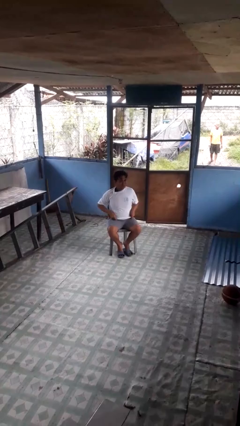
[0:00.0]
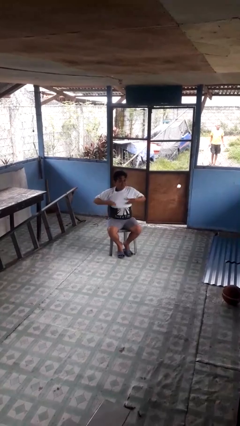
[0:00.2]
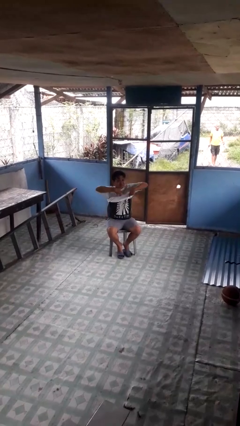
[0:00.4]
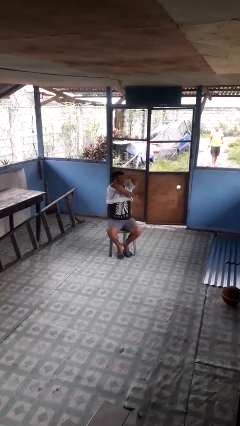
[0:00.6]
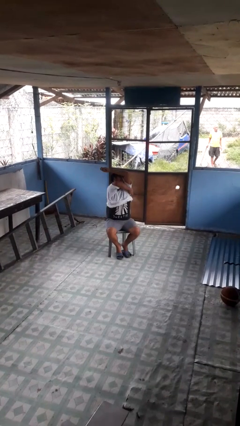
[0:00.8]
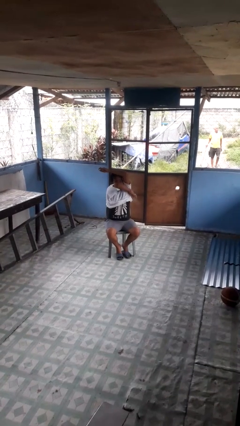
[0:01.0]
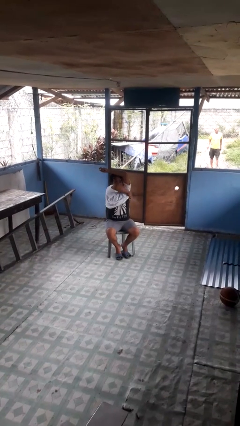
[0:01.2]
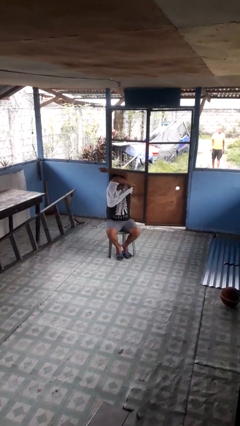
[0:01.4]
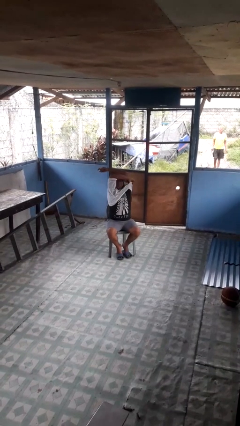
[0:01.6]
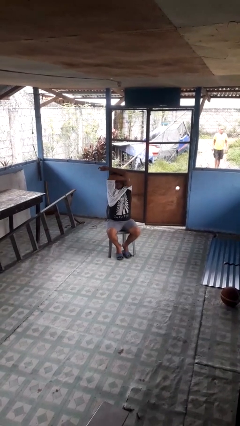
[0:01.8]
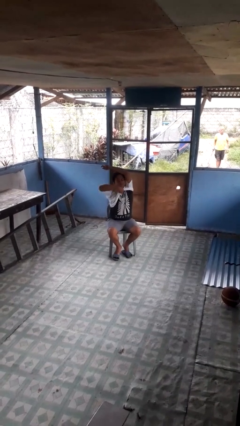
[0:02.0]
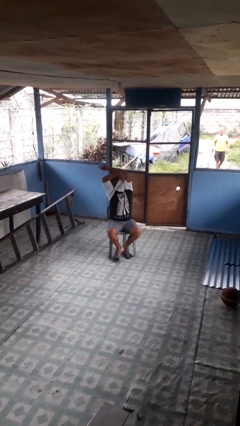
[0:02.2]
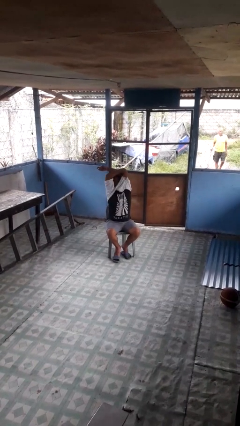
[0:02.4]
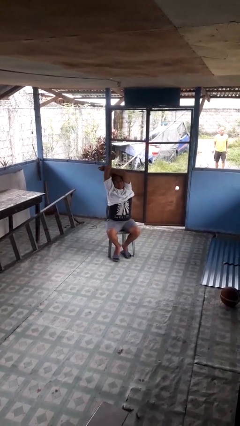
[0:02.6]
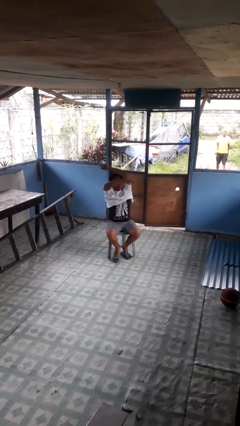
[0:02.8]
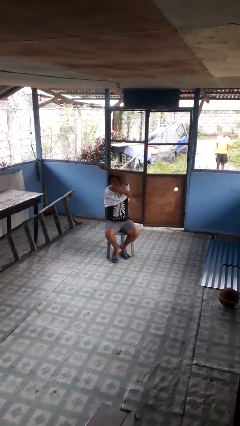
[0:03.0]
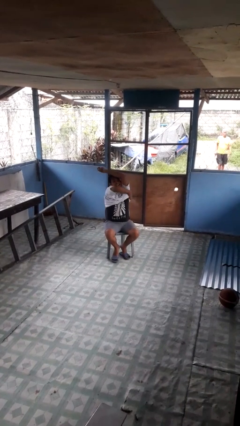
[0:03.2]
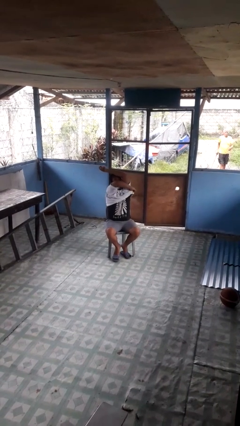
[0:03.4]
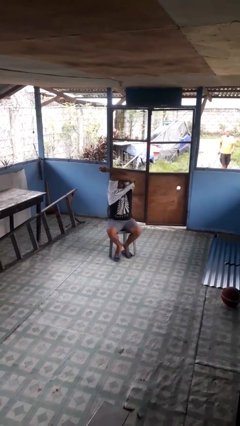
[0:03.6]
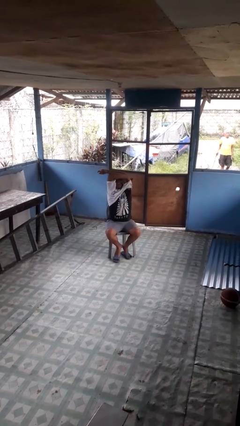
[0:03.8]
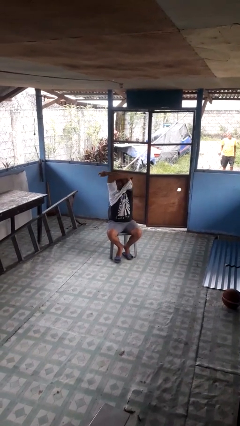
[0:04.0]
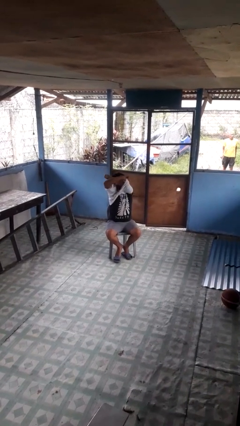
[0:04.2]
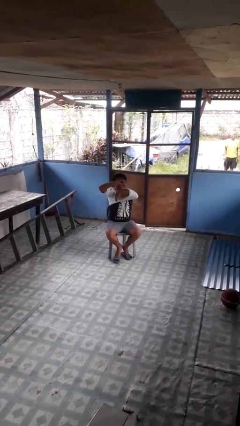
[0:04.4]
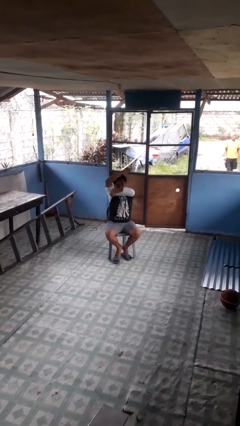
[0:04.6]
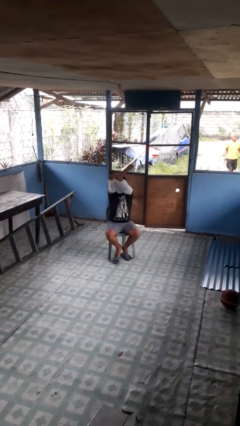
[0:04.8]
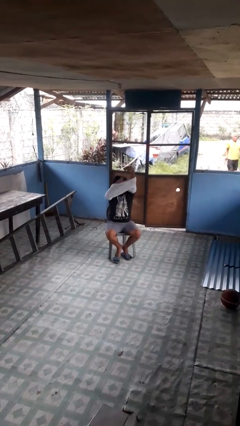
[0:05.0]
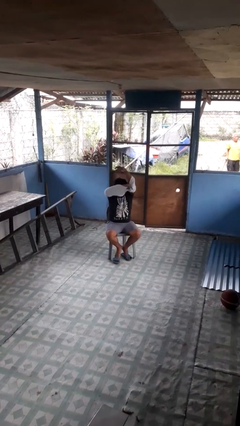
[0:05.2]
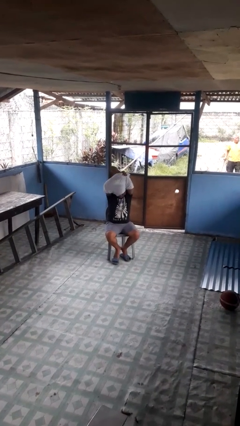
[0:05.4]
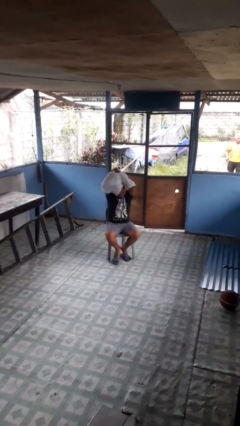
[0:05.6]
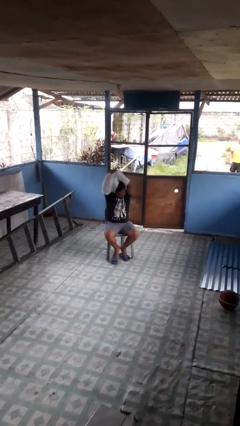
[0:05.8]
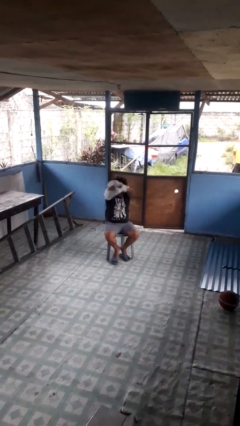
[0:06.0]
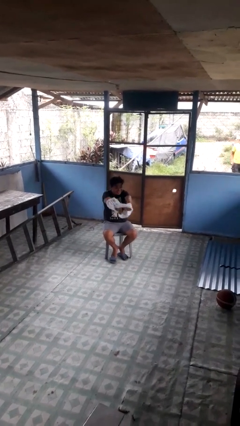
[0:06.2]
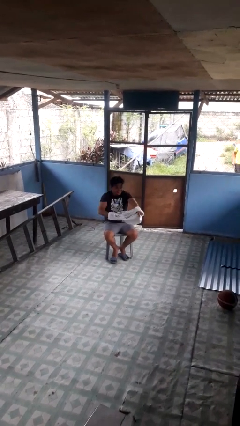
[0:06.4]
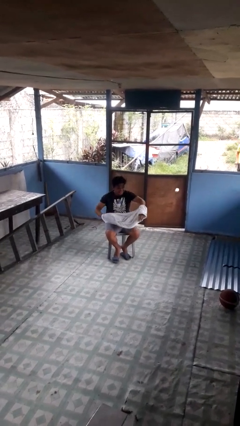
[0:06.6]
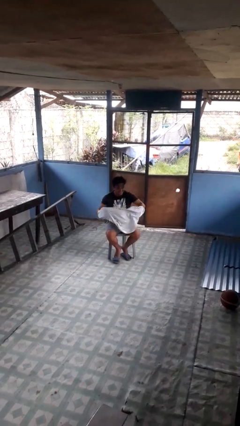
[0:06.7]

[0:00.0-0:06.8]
person takes off shirt

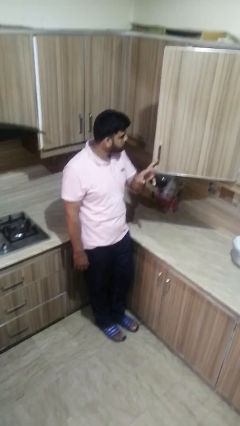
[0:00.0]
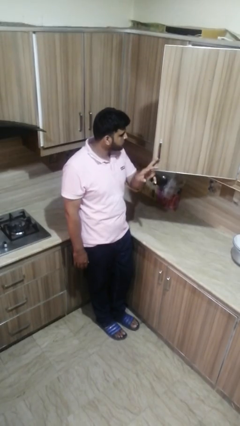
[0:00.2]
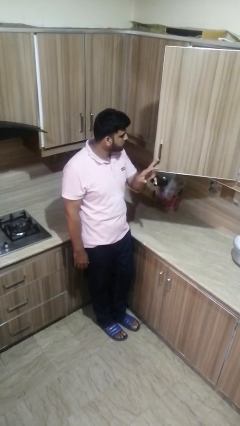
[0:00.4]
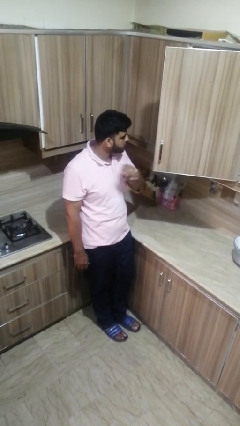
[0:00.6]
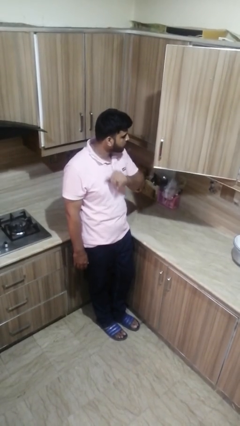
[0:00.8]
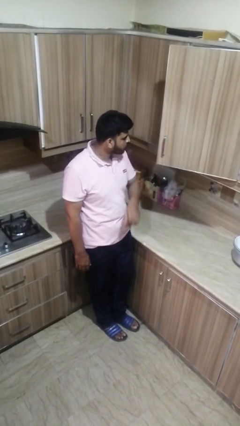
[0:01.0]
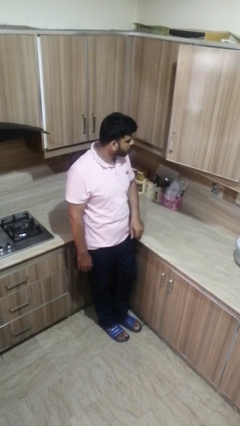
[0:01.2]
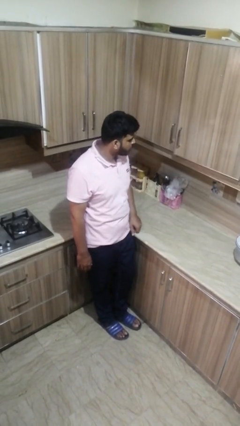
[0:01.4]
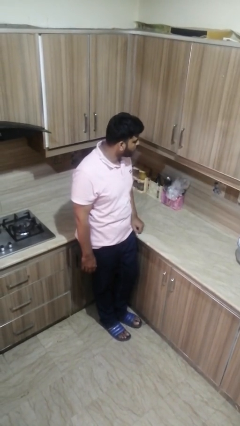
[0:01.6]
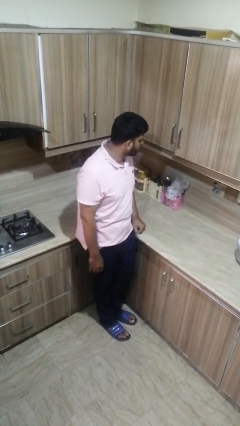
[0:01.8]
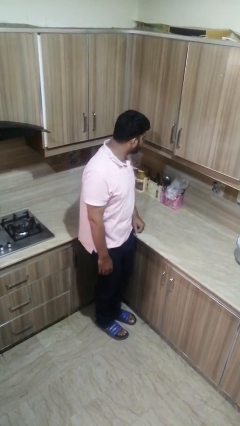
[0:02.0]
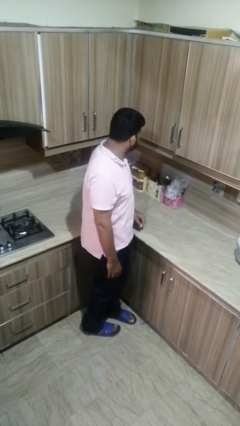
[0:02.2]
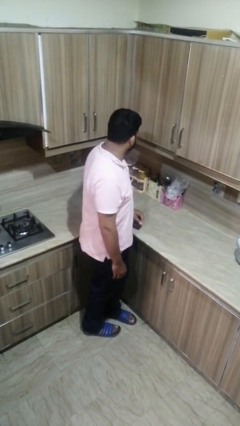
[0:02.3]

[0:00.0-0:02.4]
person closes cabinet

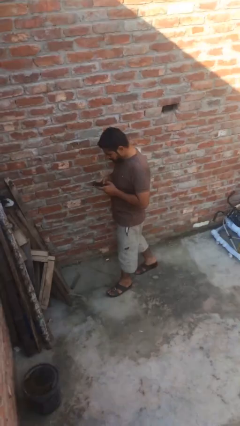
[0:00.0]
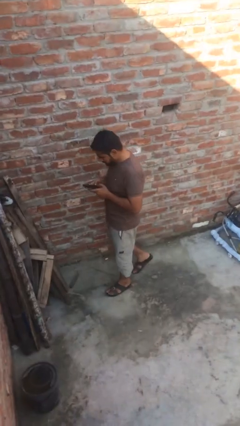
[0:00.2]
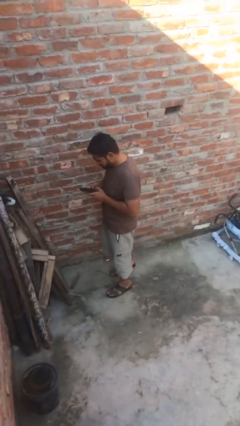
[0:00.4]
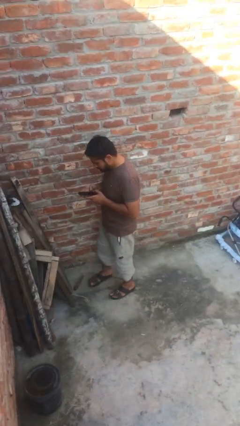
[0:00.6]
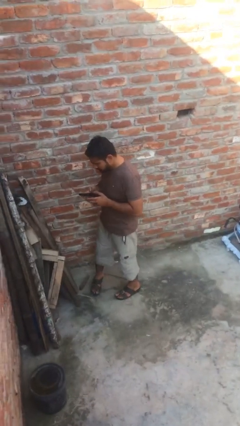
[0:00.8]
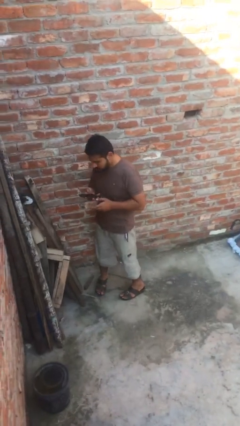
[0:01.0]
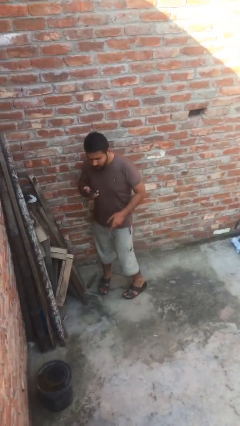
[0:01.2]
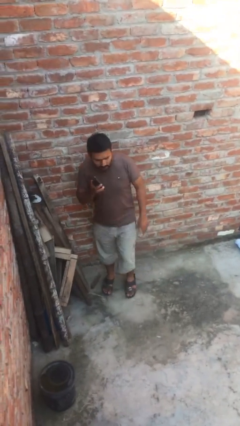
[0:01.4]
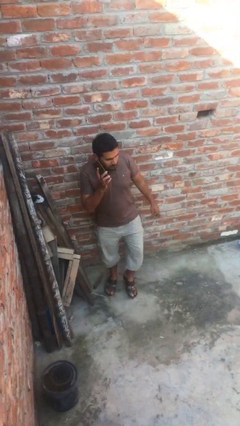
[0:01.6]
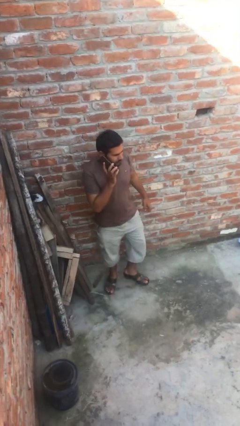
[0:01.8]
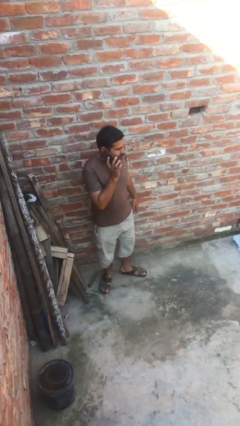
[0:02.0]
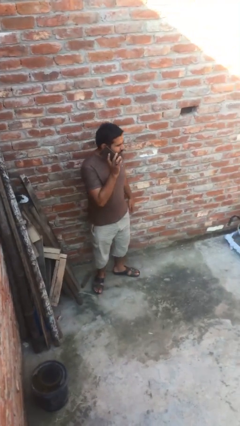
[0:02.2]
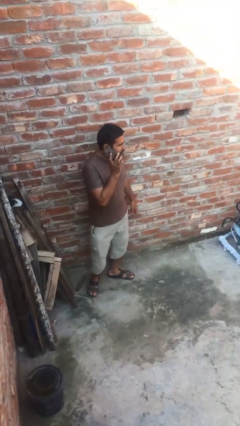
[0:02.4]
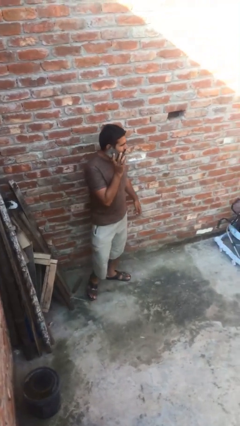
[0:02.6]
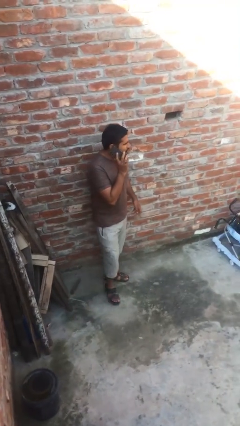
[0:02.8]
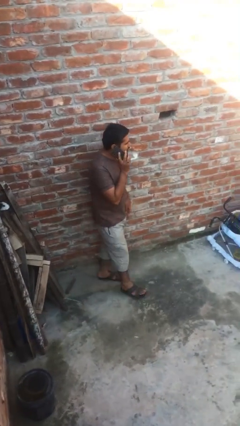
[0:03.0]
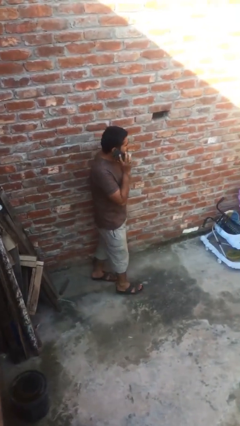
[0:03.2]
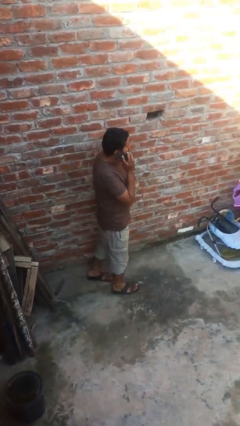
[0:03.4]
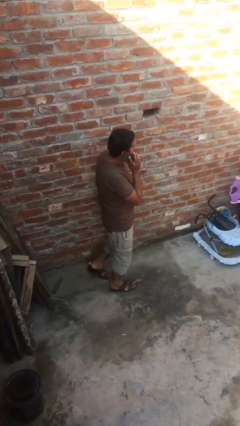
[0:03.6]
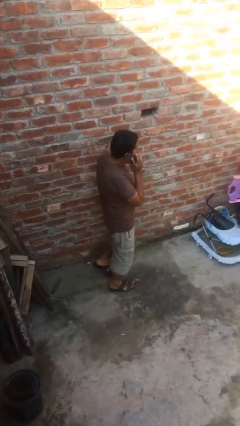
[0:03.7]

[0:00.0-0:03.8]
person talks on phone

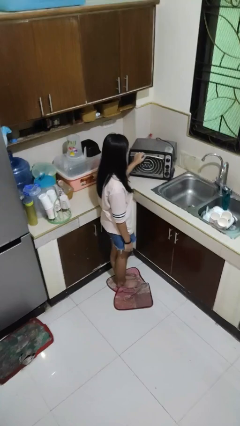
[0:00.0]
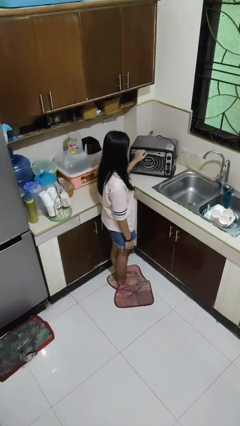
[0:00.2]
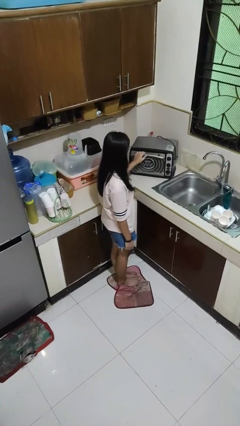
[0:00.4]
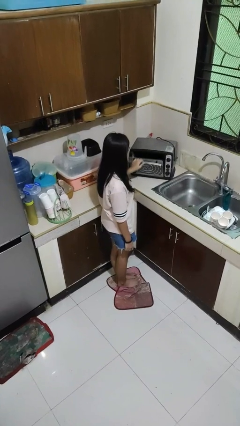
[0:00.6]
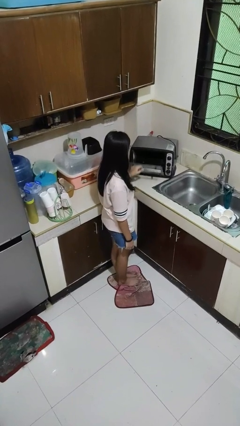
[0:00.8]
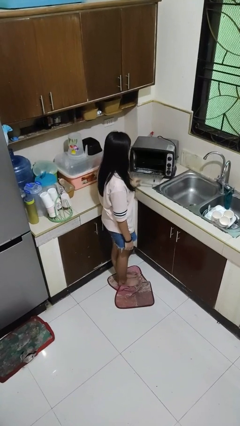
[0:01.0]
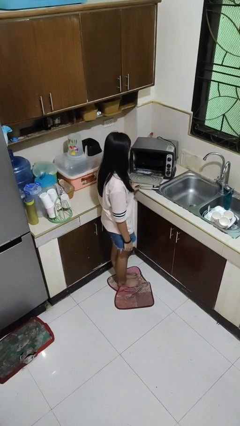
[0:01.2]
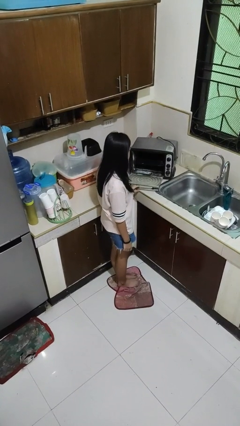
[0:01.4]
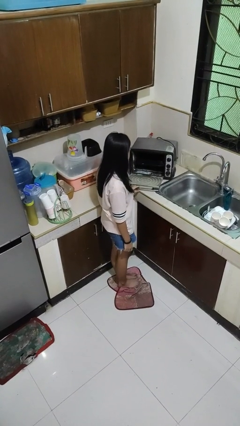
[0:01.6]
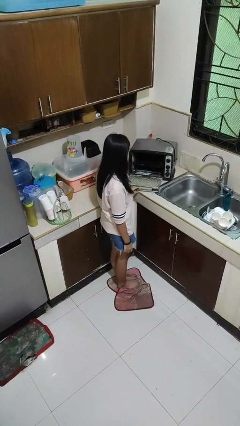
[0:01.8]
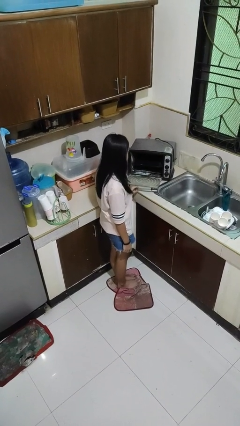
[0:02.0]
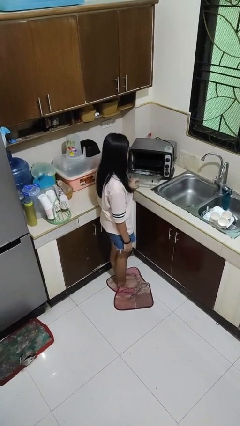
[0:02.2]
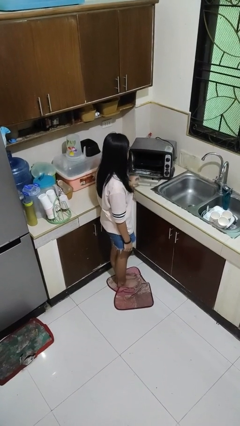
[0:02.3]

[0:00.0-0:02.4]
person opens microwave

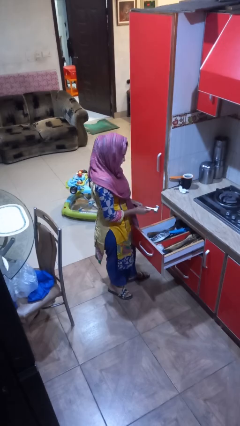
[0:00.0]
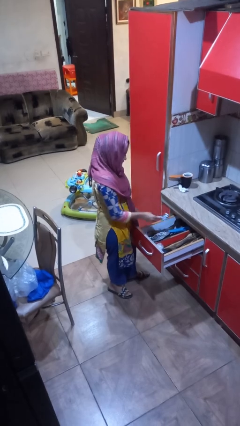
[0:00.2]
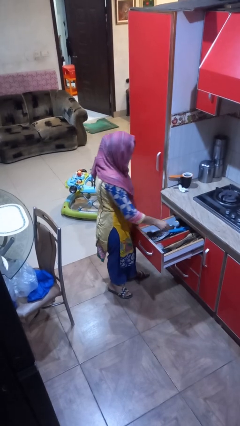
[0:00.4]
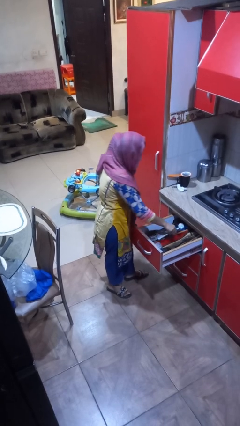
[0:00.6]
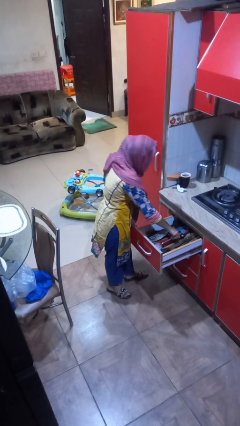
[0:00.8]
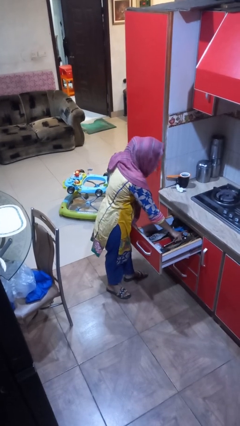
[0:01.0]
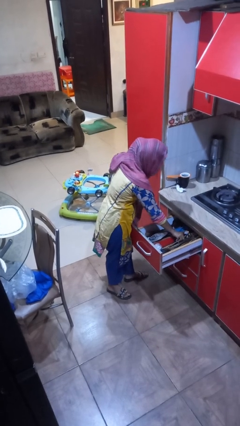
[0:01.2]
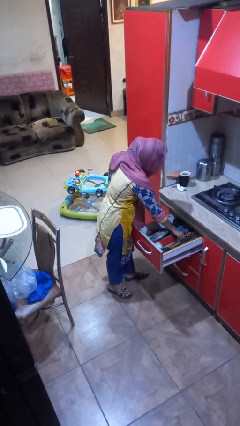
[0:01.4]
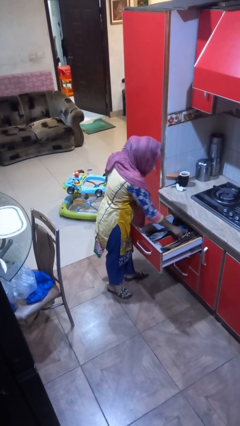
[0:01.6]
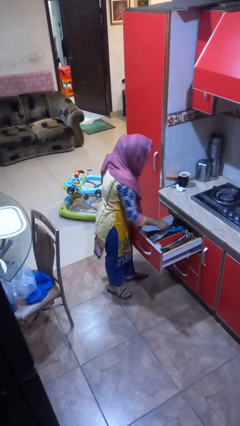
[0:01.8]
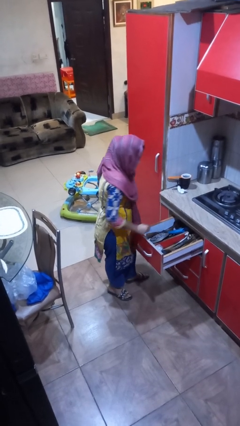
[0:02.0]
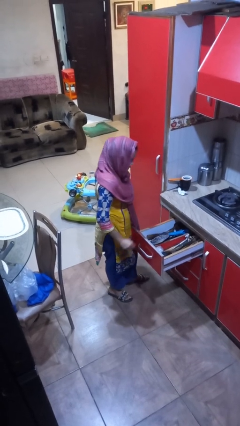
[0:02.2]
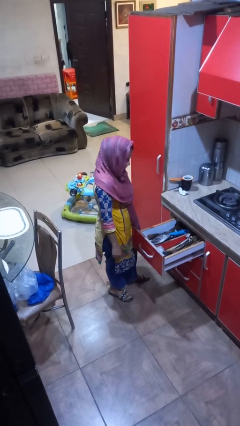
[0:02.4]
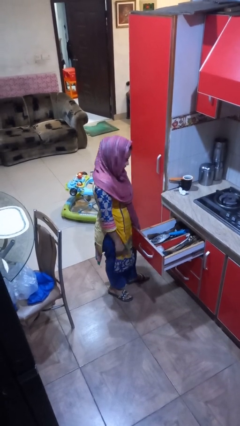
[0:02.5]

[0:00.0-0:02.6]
person puts object into kitchen drawer
